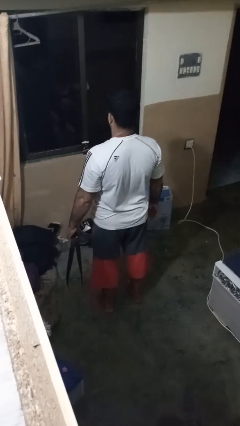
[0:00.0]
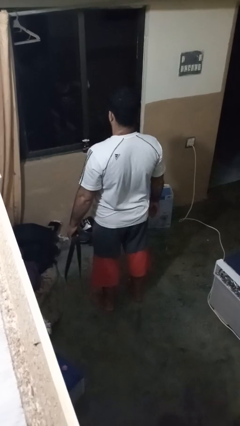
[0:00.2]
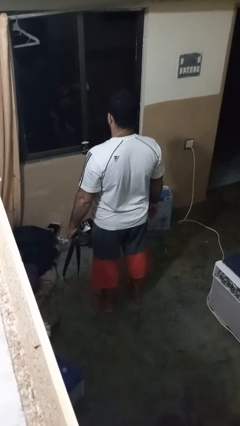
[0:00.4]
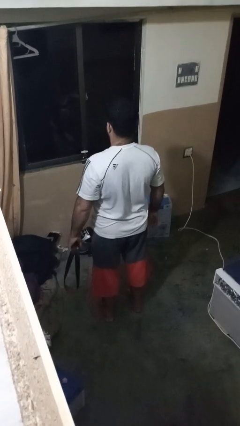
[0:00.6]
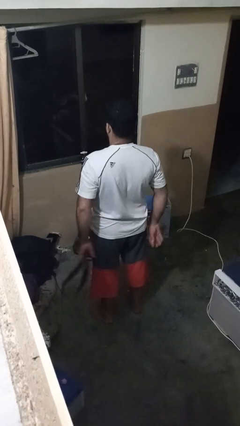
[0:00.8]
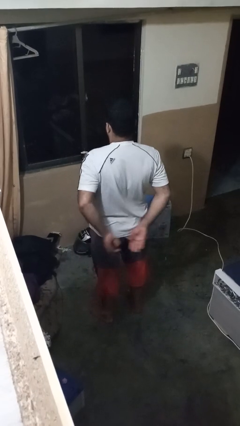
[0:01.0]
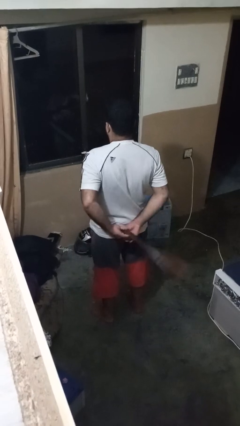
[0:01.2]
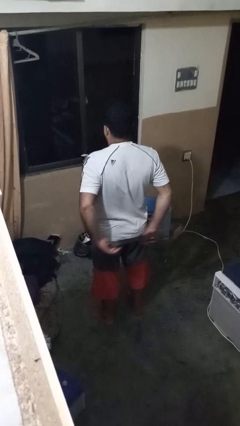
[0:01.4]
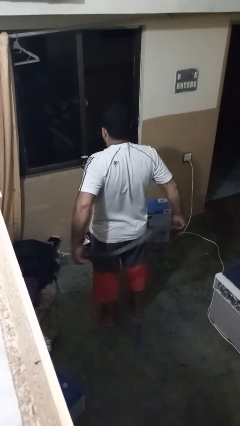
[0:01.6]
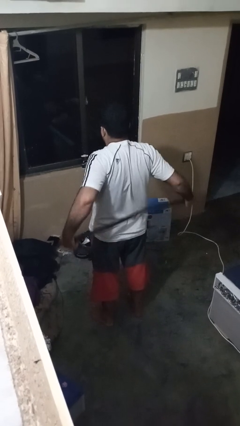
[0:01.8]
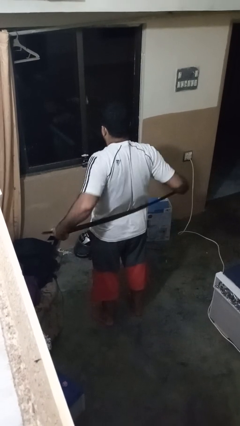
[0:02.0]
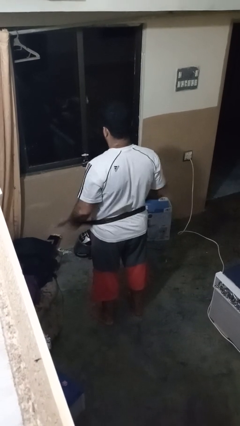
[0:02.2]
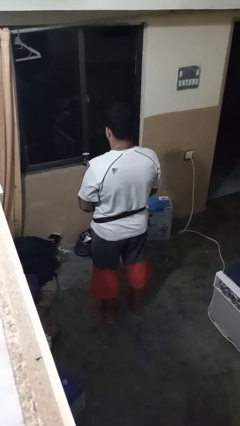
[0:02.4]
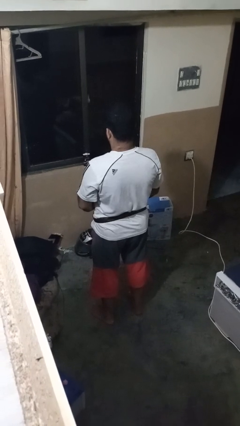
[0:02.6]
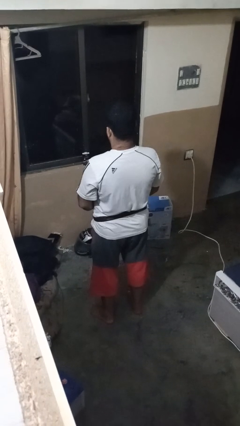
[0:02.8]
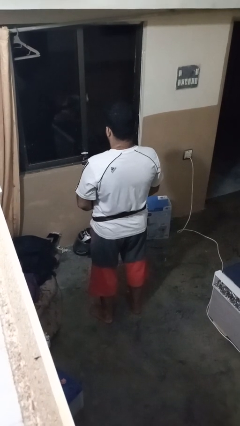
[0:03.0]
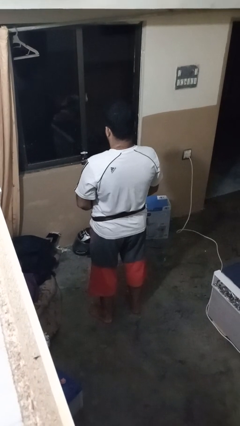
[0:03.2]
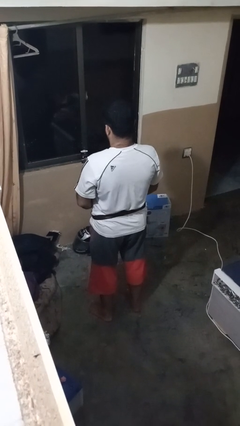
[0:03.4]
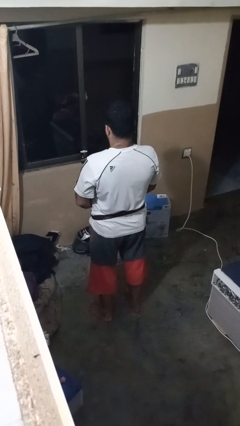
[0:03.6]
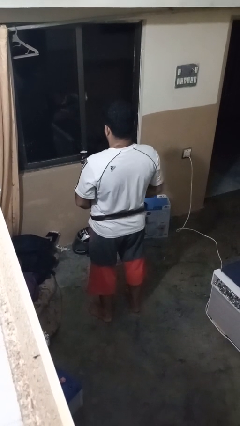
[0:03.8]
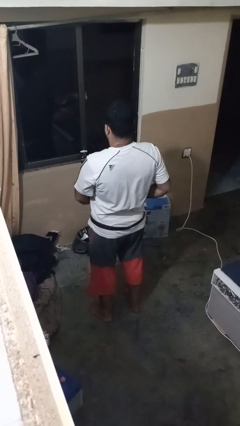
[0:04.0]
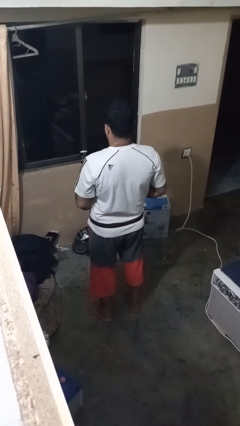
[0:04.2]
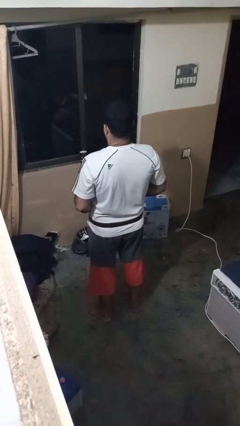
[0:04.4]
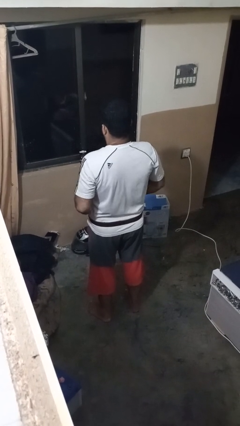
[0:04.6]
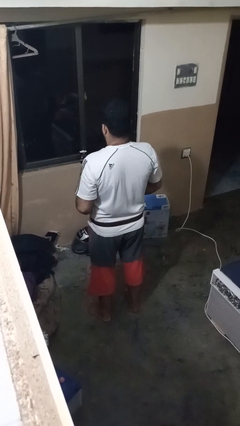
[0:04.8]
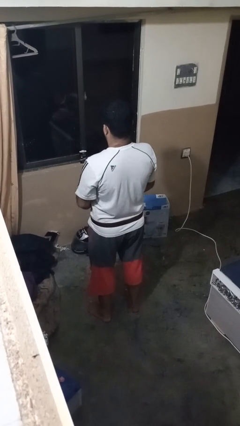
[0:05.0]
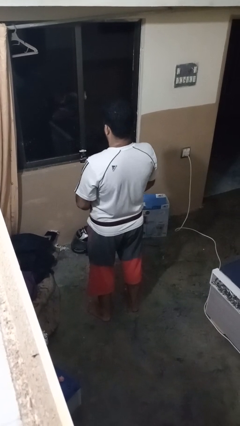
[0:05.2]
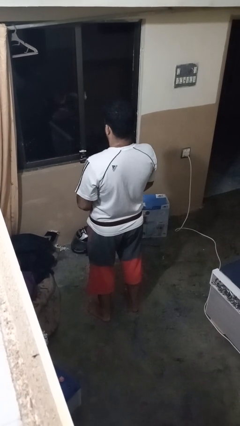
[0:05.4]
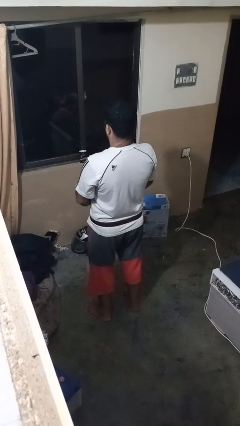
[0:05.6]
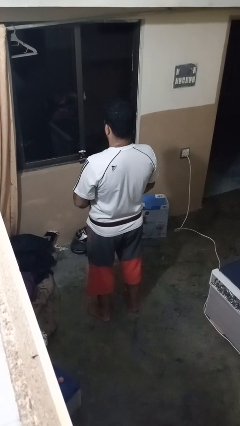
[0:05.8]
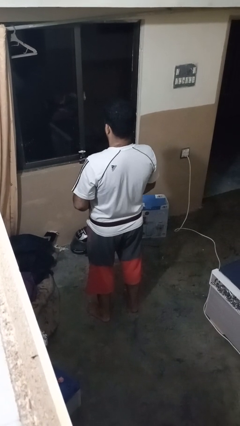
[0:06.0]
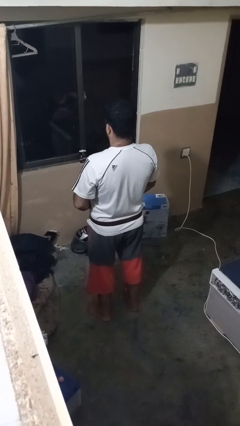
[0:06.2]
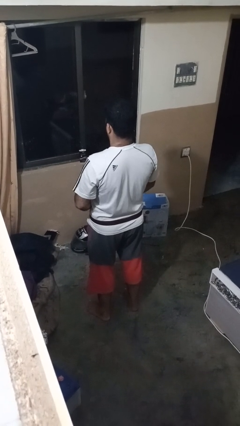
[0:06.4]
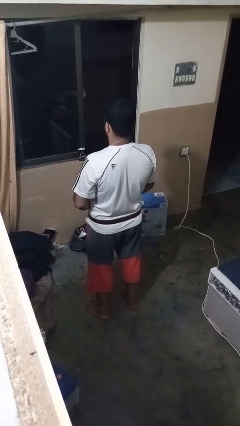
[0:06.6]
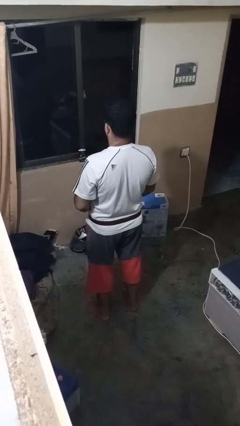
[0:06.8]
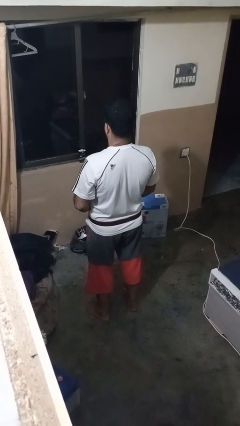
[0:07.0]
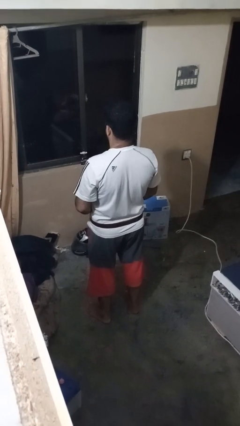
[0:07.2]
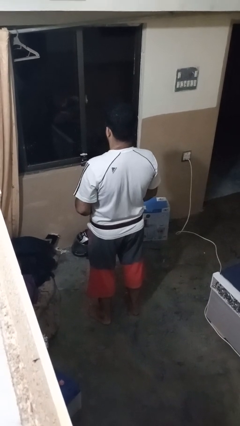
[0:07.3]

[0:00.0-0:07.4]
person puts on belt

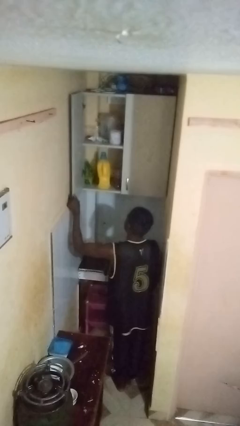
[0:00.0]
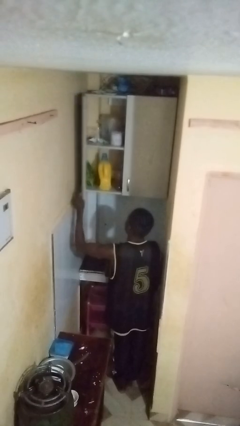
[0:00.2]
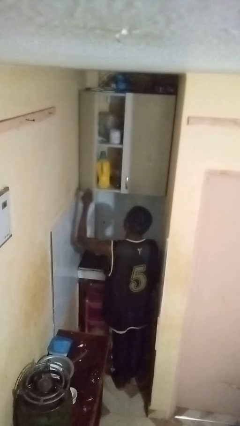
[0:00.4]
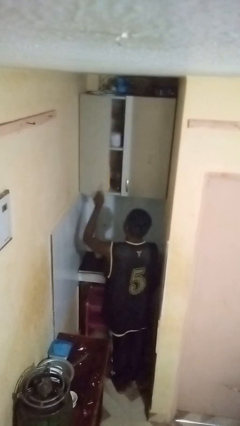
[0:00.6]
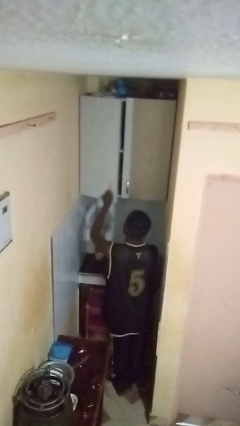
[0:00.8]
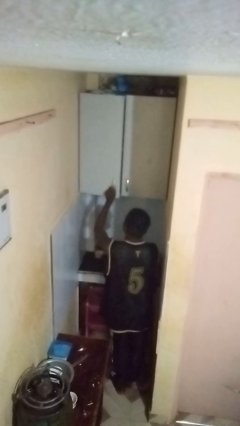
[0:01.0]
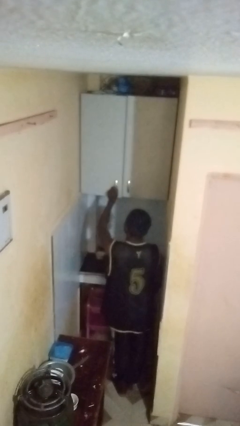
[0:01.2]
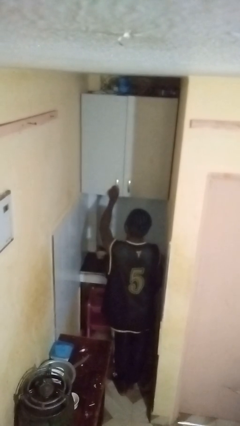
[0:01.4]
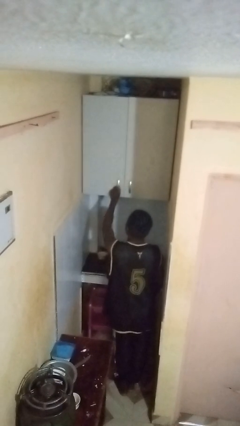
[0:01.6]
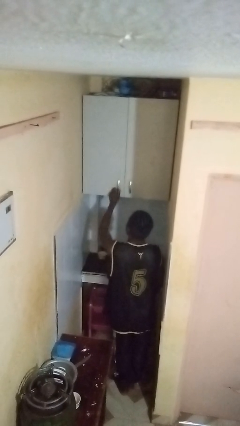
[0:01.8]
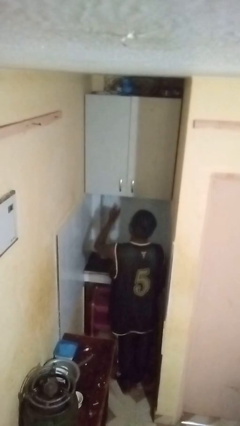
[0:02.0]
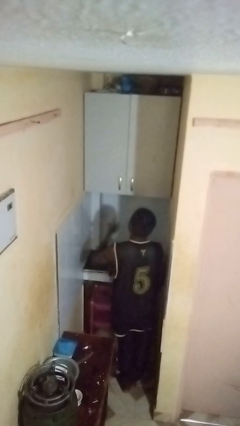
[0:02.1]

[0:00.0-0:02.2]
person closes cabinet

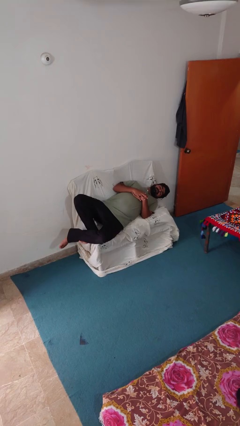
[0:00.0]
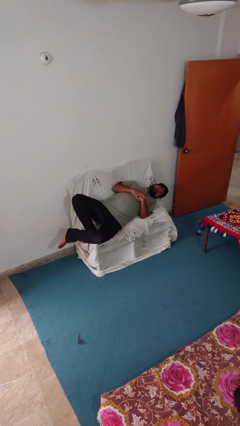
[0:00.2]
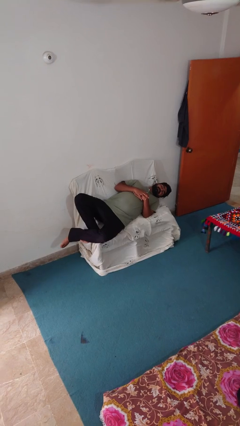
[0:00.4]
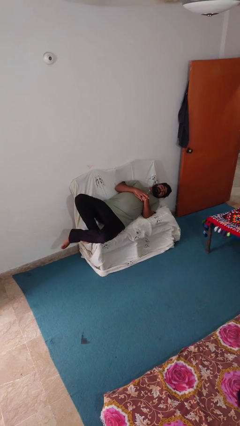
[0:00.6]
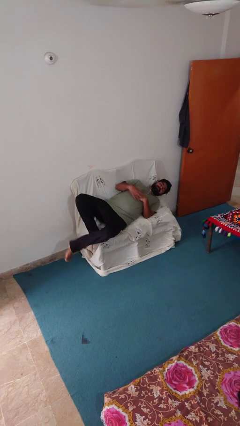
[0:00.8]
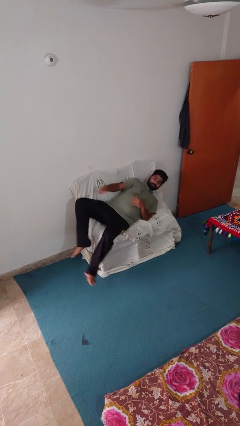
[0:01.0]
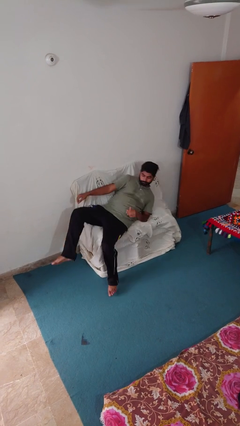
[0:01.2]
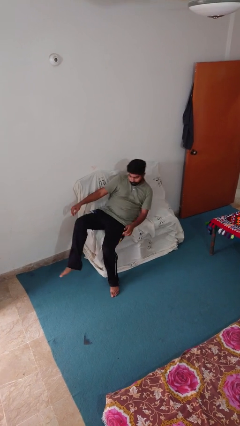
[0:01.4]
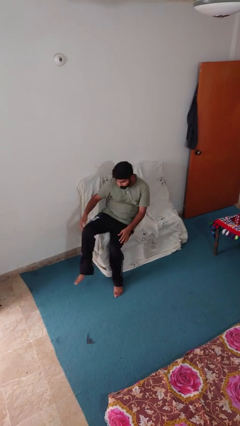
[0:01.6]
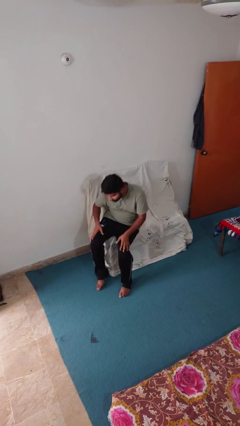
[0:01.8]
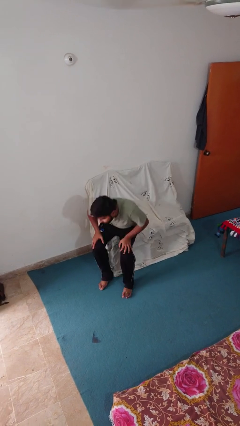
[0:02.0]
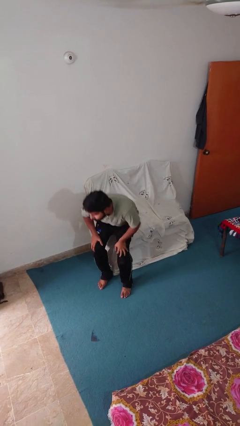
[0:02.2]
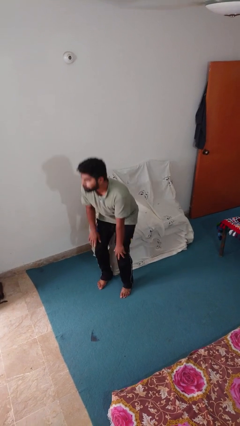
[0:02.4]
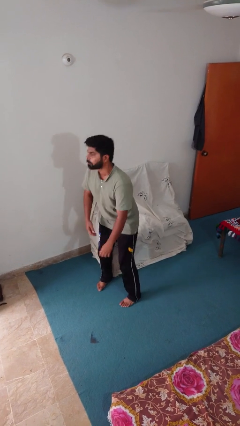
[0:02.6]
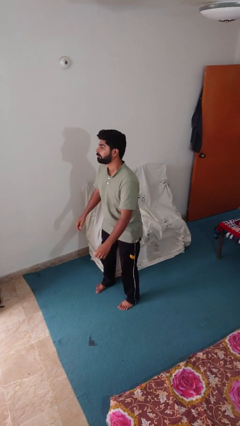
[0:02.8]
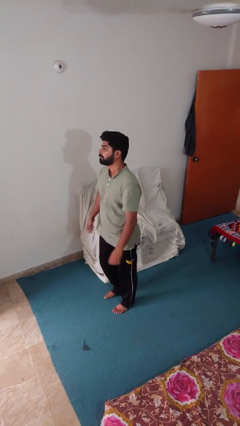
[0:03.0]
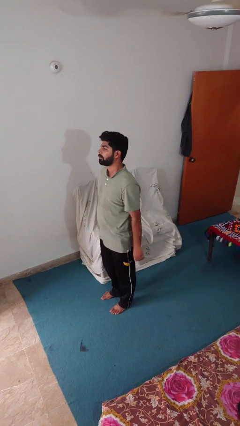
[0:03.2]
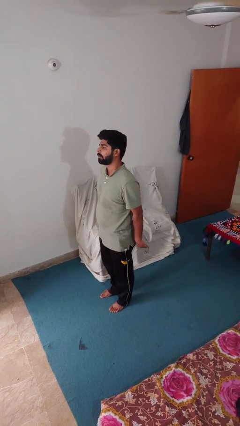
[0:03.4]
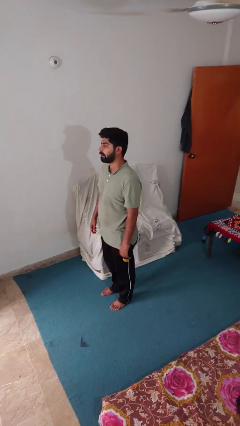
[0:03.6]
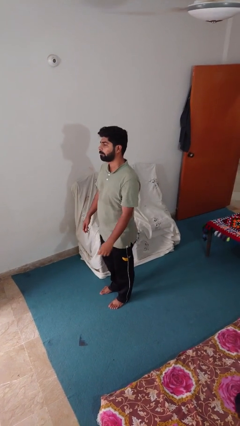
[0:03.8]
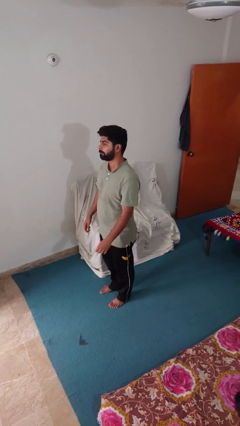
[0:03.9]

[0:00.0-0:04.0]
person stands up

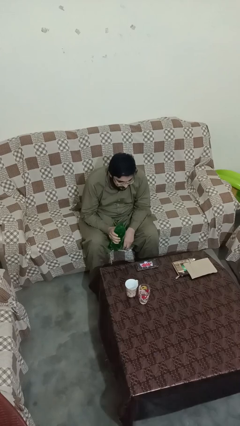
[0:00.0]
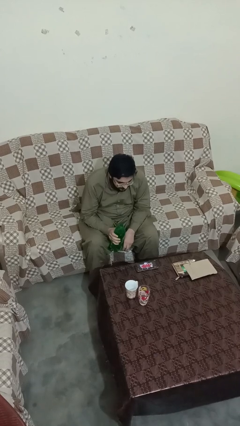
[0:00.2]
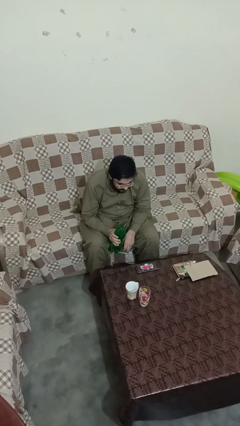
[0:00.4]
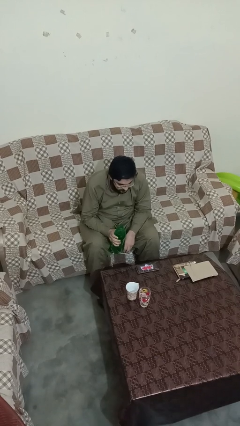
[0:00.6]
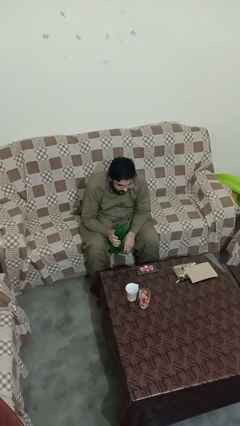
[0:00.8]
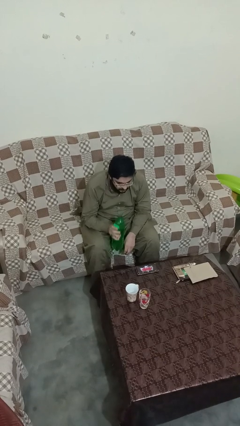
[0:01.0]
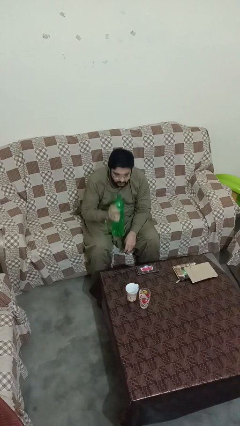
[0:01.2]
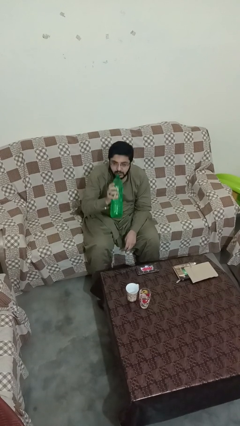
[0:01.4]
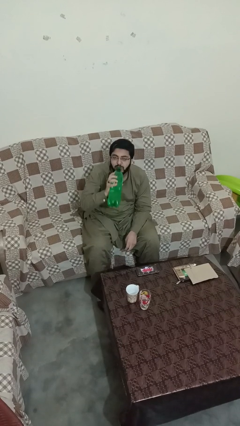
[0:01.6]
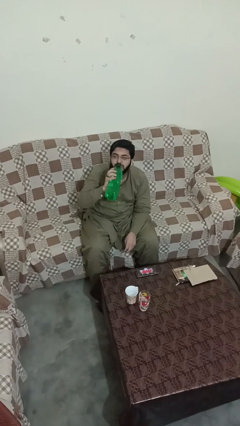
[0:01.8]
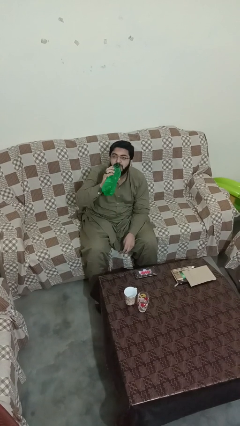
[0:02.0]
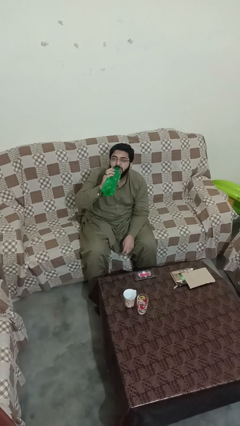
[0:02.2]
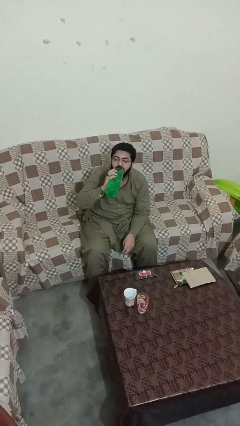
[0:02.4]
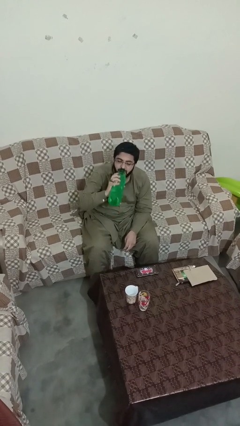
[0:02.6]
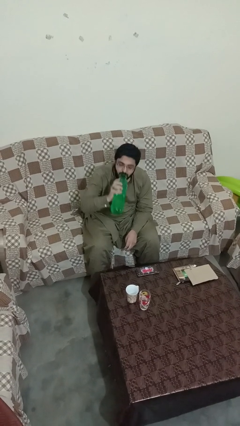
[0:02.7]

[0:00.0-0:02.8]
person drinks from bottle

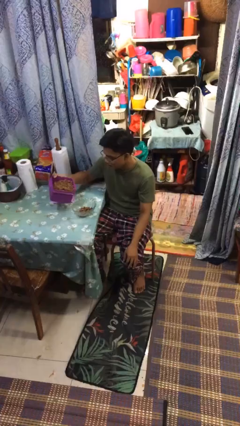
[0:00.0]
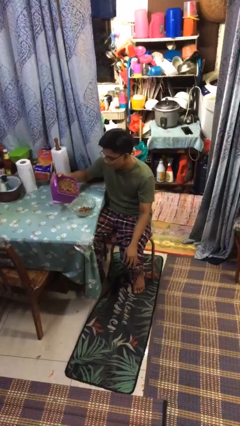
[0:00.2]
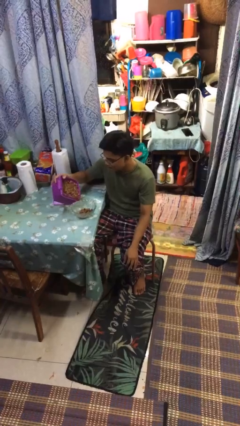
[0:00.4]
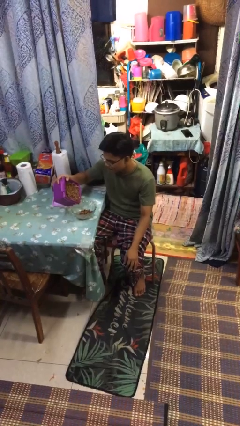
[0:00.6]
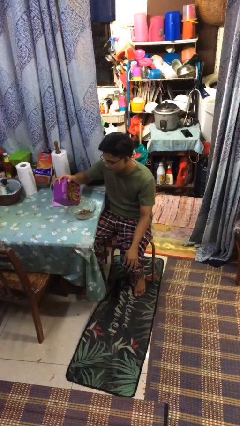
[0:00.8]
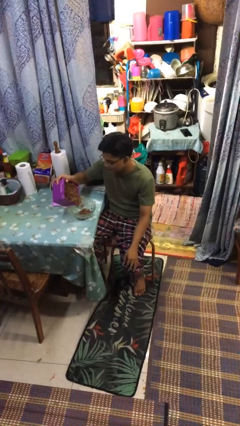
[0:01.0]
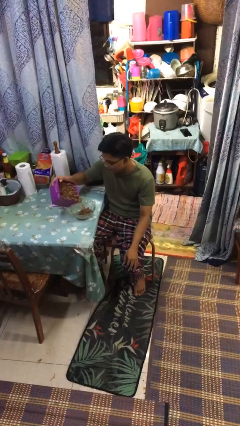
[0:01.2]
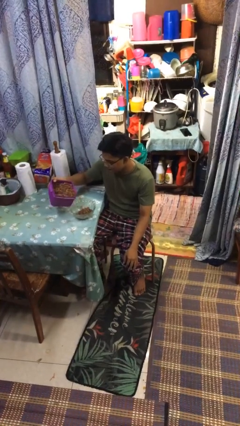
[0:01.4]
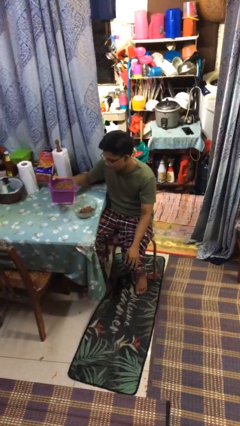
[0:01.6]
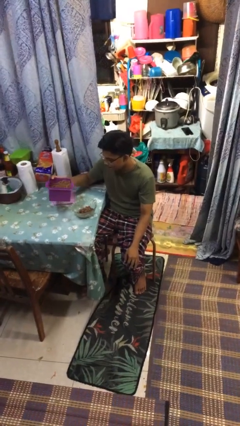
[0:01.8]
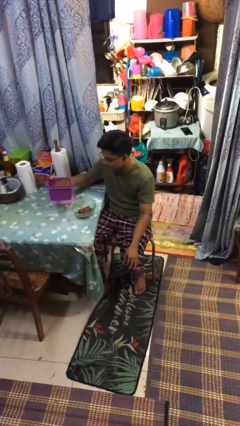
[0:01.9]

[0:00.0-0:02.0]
person pours into bowl
